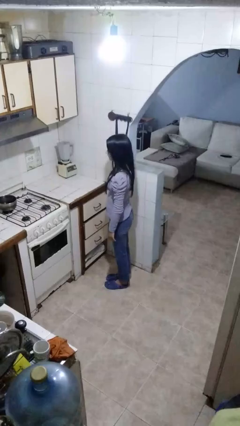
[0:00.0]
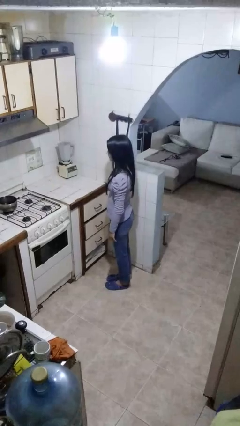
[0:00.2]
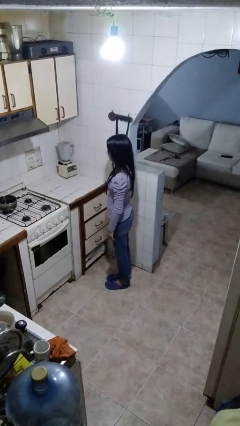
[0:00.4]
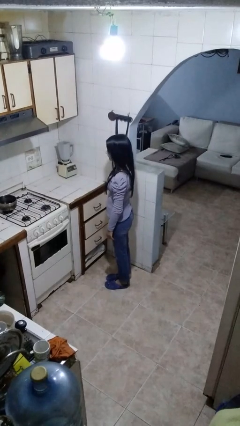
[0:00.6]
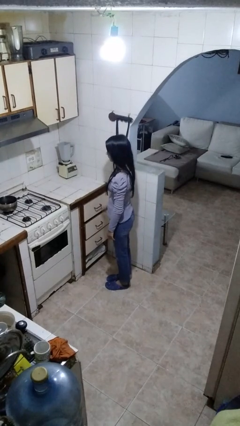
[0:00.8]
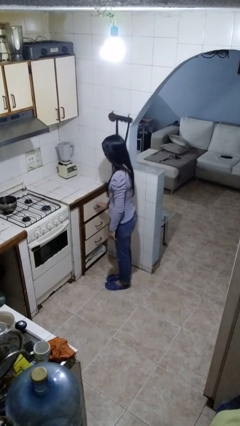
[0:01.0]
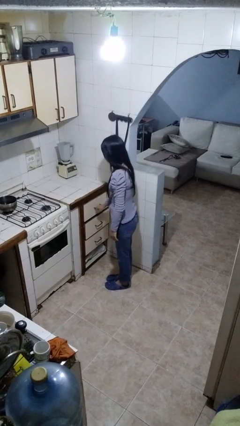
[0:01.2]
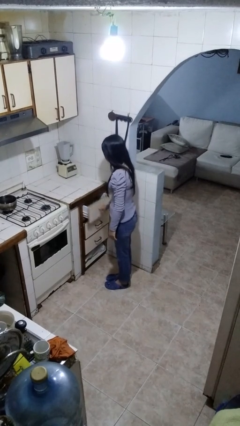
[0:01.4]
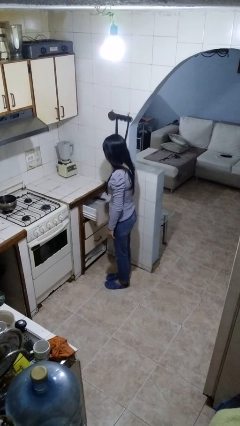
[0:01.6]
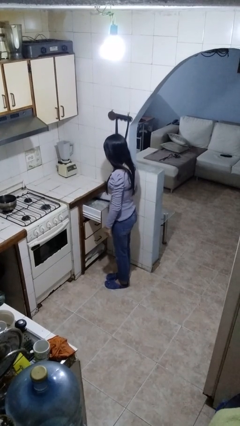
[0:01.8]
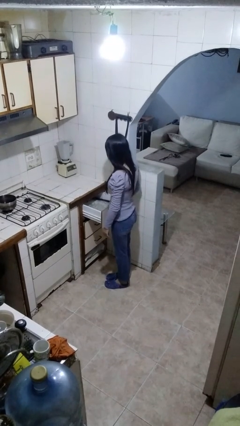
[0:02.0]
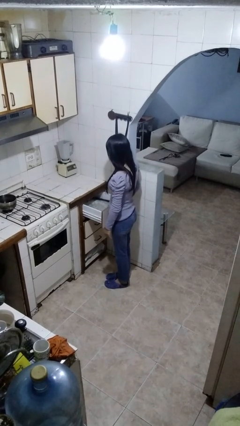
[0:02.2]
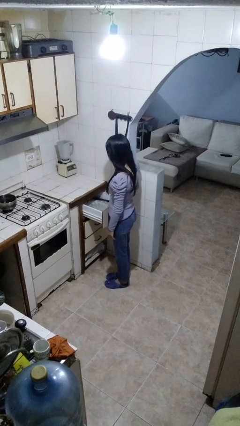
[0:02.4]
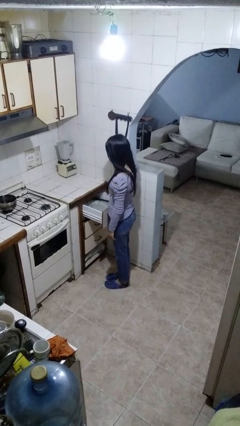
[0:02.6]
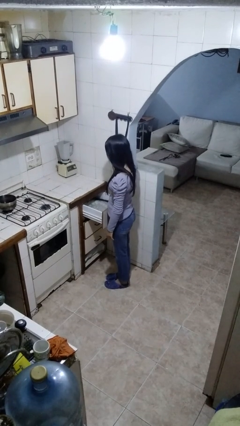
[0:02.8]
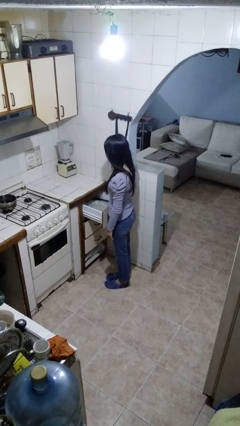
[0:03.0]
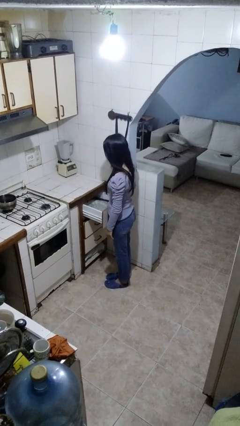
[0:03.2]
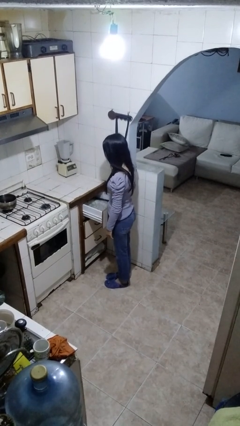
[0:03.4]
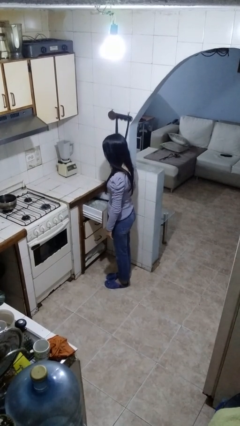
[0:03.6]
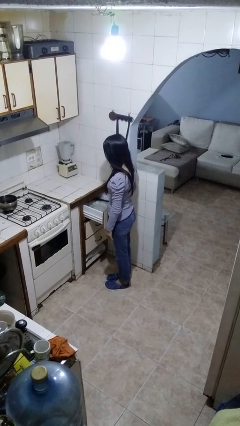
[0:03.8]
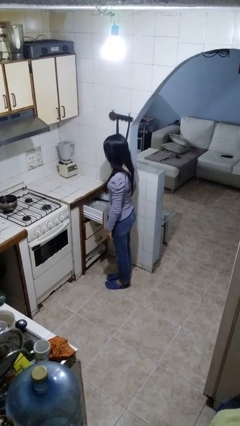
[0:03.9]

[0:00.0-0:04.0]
person opens cabinet

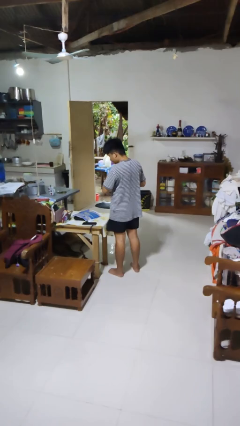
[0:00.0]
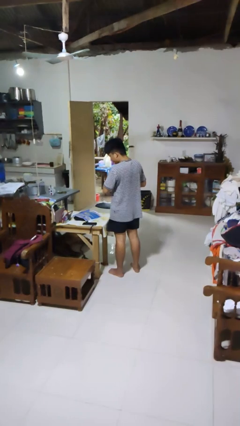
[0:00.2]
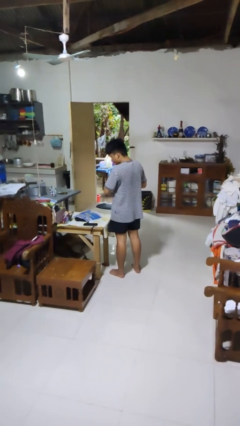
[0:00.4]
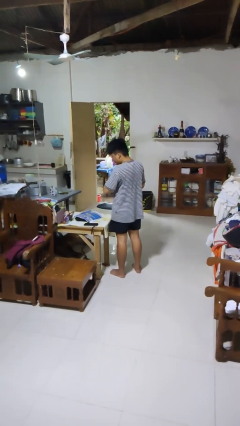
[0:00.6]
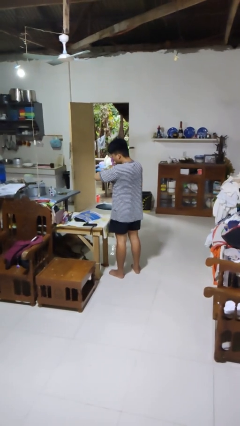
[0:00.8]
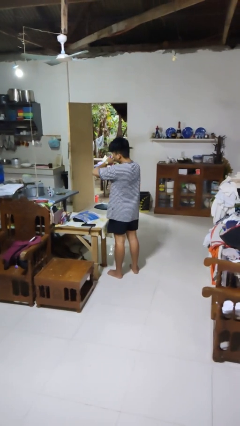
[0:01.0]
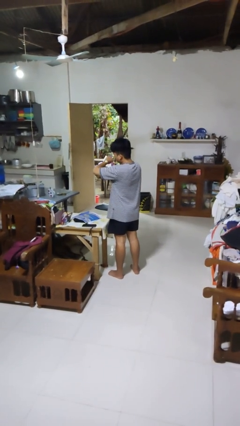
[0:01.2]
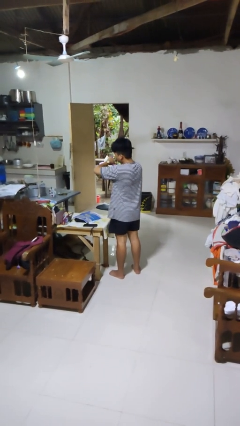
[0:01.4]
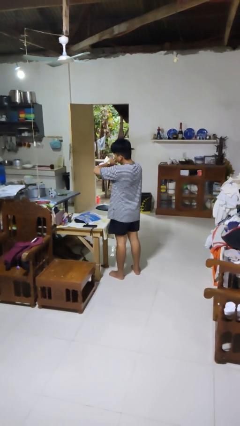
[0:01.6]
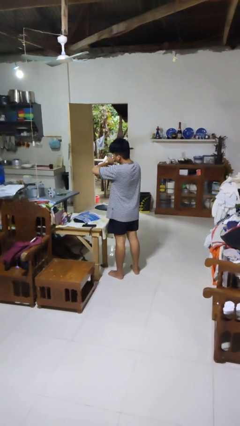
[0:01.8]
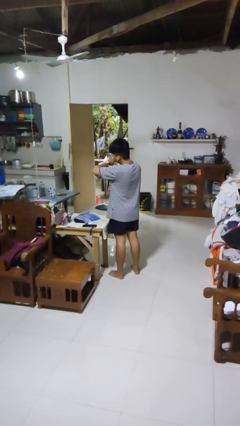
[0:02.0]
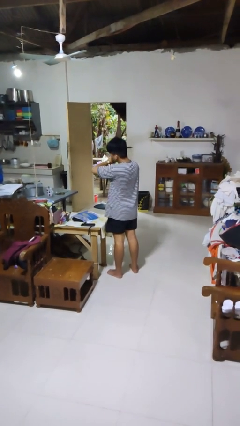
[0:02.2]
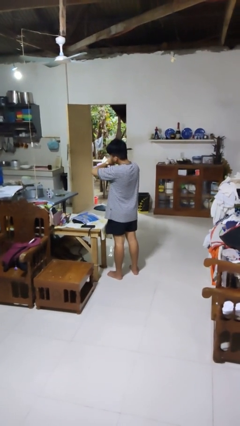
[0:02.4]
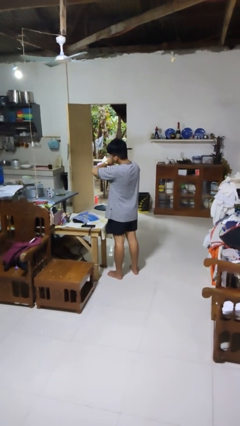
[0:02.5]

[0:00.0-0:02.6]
person looks at wristwatch

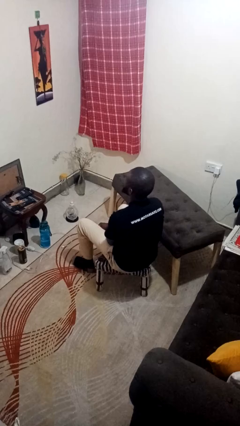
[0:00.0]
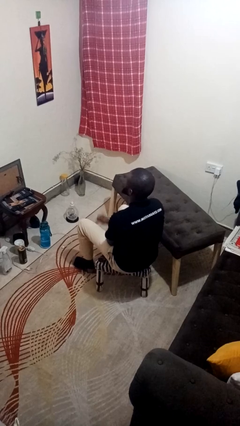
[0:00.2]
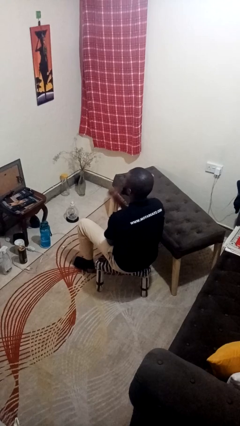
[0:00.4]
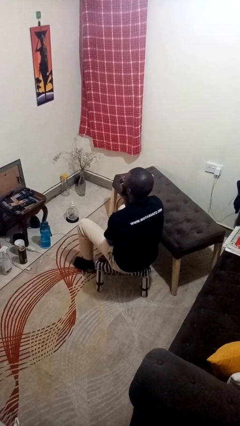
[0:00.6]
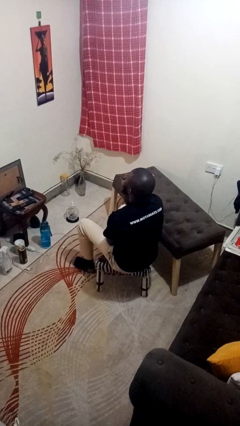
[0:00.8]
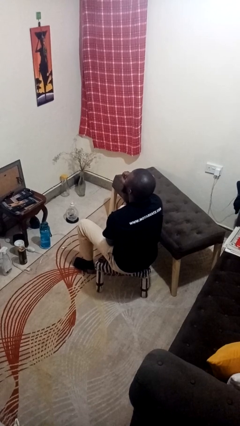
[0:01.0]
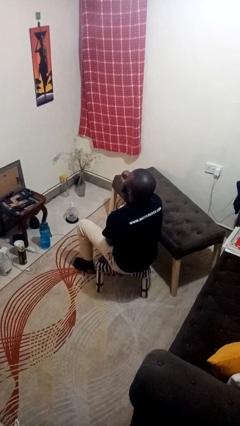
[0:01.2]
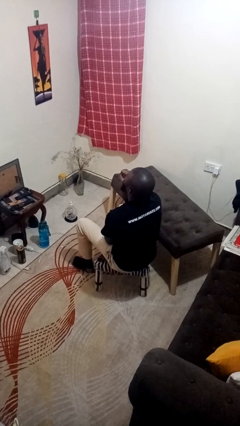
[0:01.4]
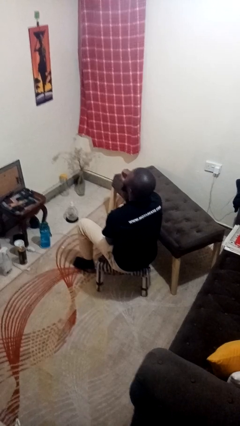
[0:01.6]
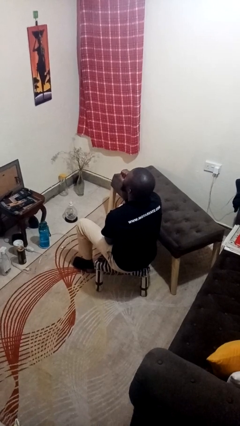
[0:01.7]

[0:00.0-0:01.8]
person yawns

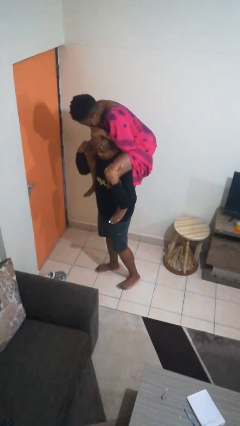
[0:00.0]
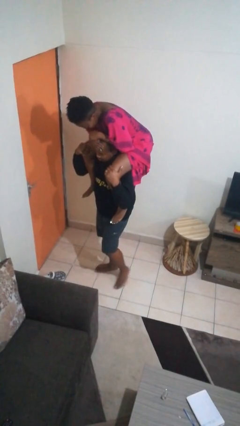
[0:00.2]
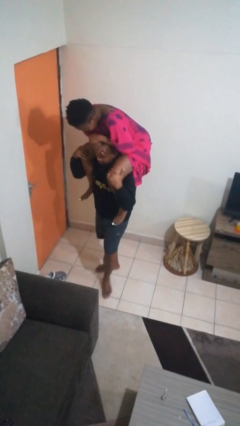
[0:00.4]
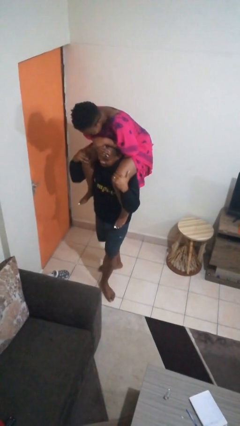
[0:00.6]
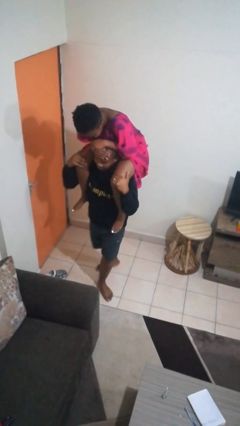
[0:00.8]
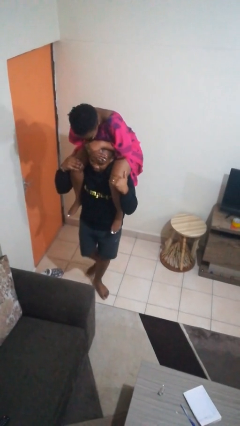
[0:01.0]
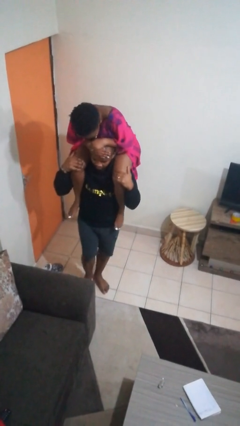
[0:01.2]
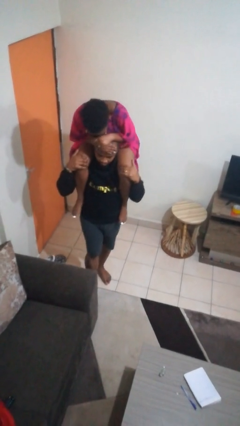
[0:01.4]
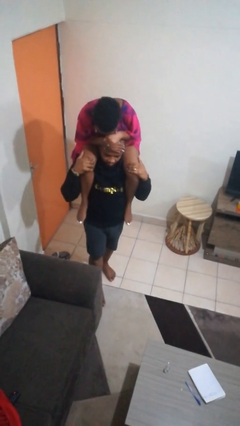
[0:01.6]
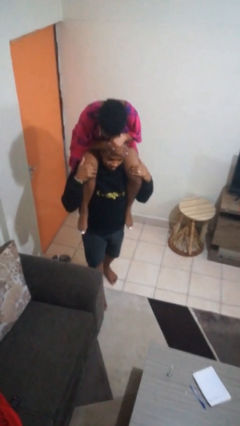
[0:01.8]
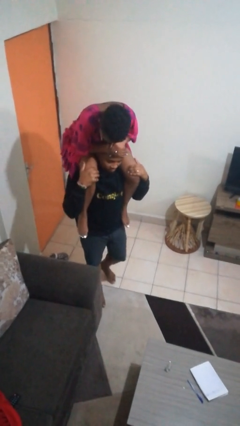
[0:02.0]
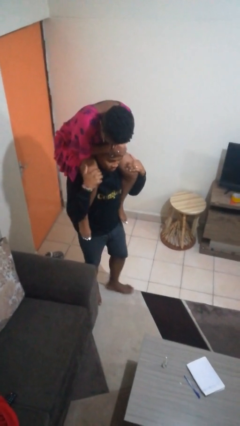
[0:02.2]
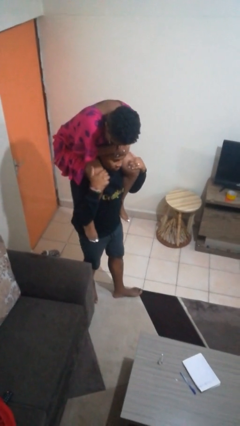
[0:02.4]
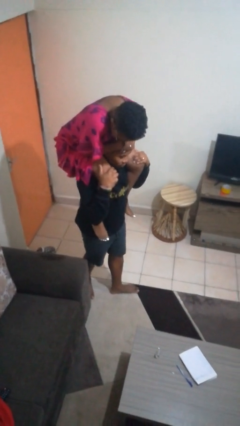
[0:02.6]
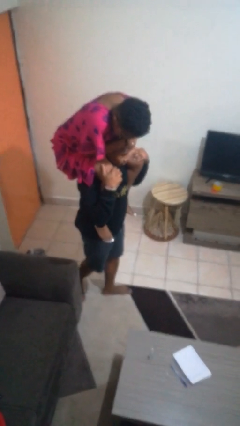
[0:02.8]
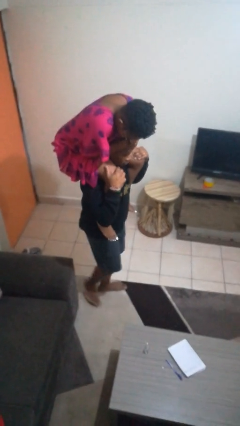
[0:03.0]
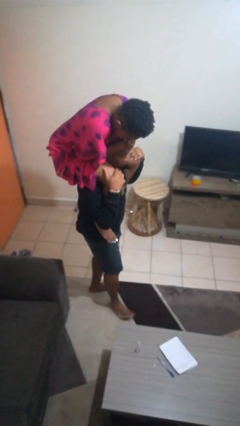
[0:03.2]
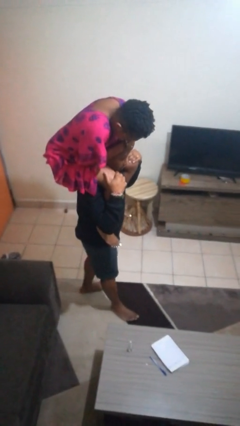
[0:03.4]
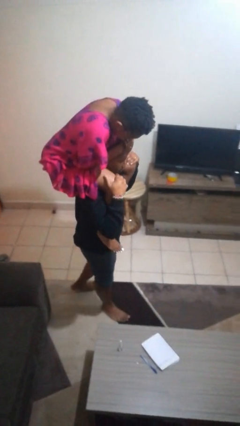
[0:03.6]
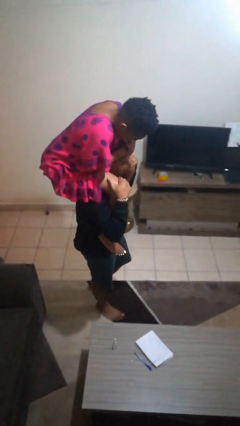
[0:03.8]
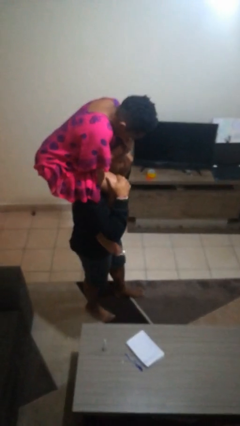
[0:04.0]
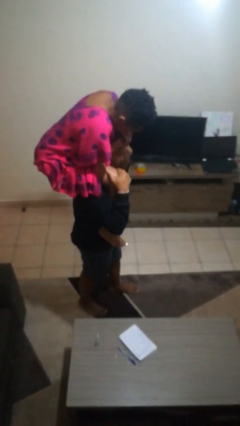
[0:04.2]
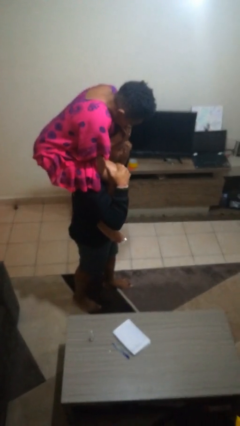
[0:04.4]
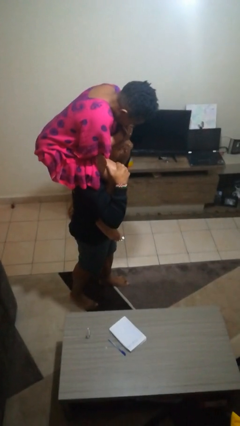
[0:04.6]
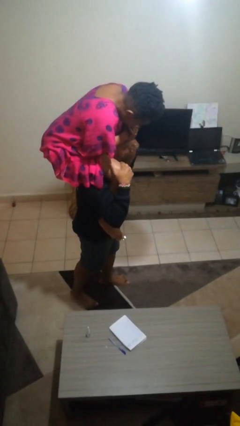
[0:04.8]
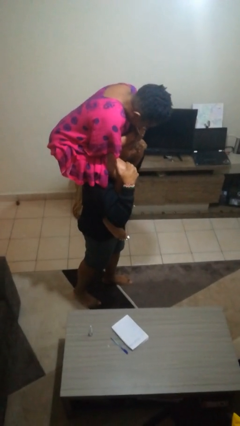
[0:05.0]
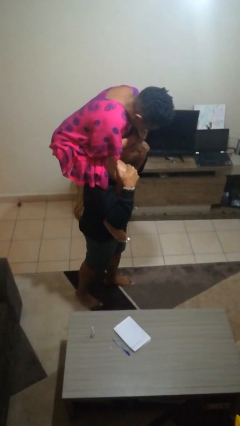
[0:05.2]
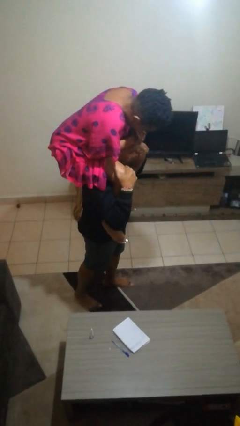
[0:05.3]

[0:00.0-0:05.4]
person carries person on shoulders

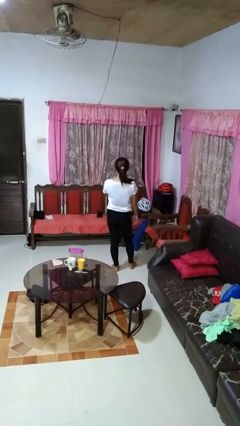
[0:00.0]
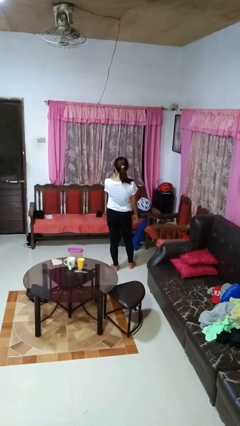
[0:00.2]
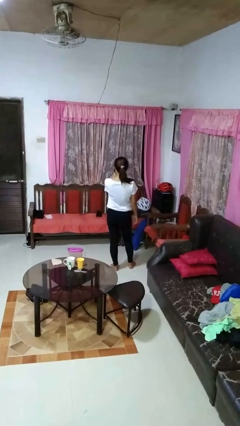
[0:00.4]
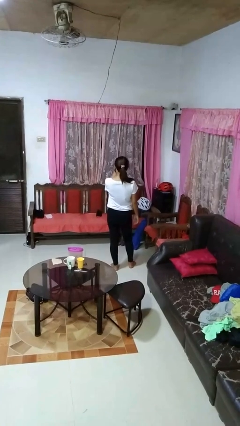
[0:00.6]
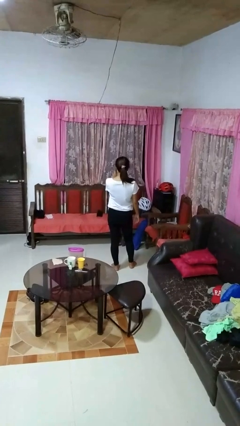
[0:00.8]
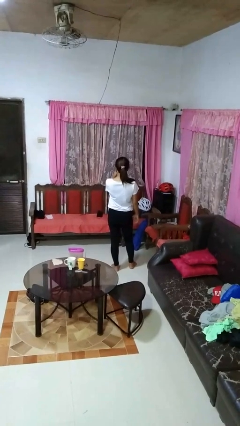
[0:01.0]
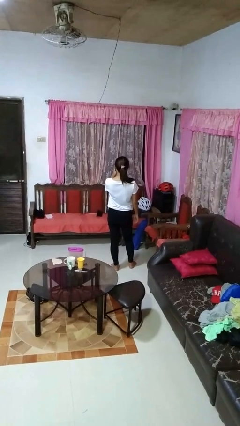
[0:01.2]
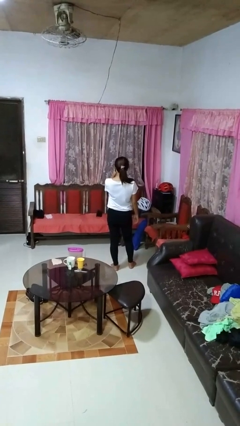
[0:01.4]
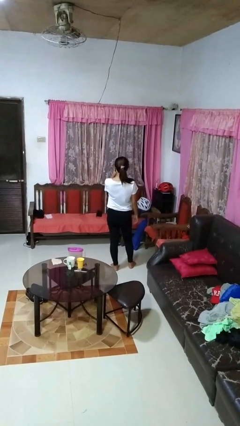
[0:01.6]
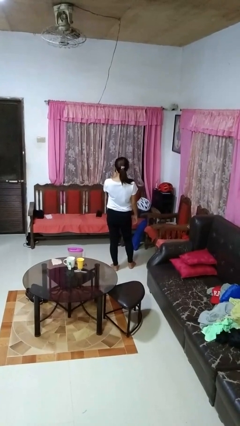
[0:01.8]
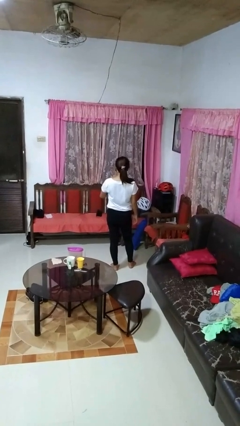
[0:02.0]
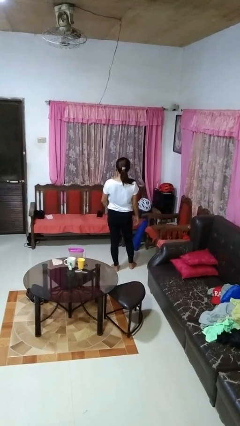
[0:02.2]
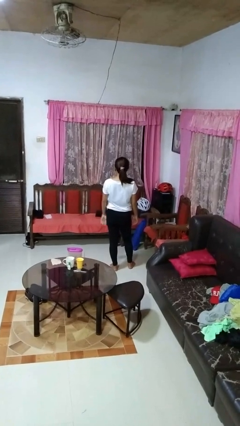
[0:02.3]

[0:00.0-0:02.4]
person gestures watch closely

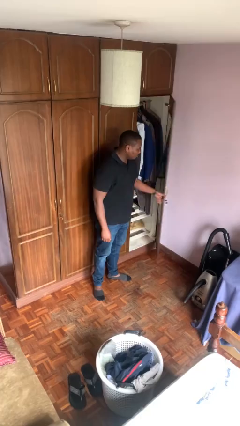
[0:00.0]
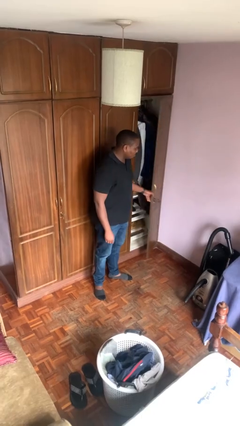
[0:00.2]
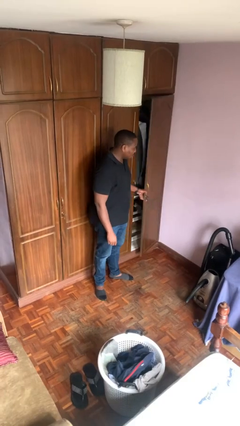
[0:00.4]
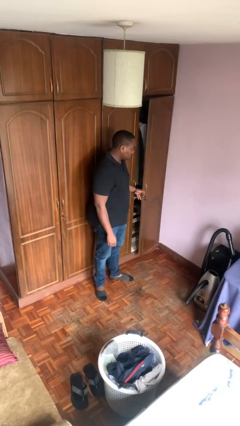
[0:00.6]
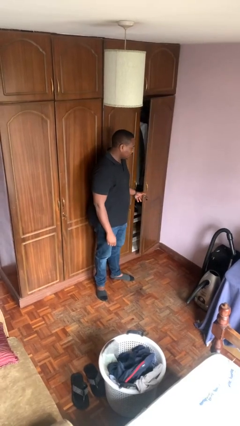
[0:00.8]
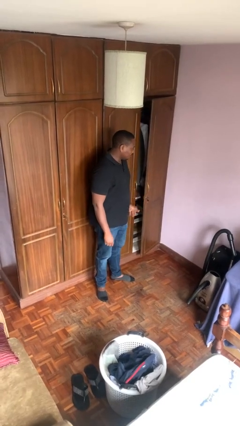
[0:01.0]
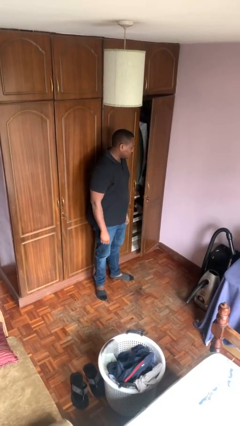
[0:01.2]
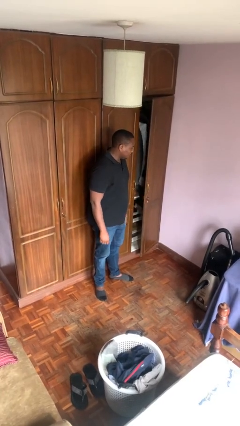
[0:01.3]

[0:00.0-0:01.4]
person closes closet door
